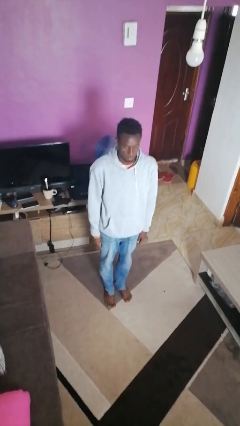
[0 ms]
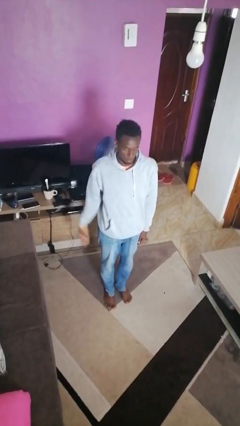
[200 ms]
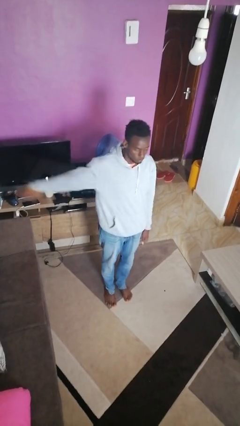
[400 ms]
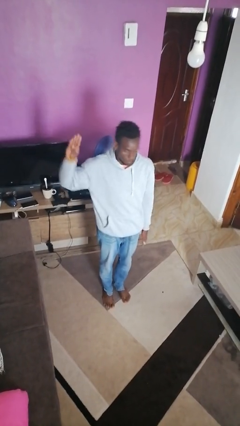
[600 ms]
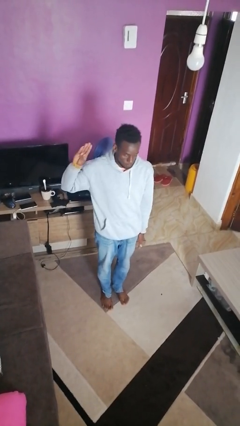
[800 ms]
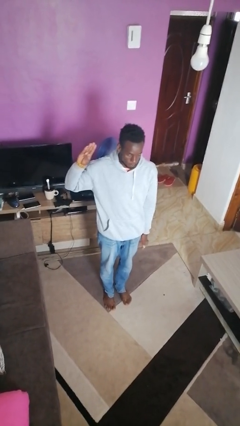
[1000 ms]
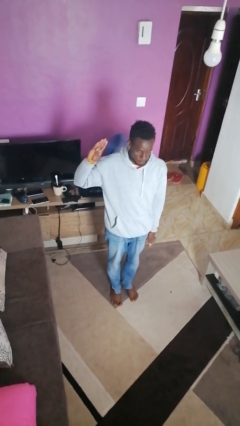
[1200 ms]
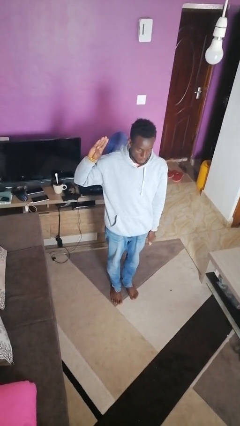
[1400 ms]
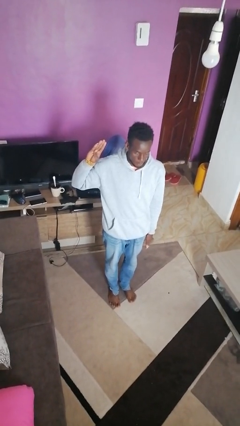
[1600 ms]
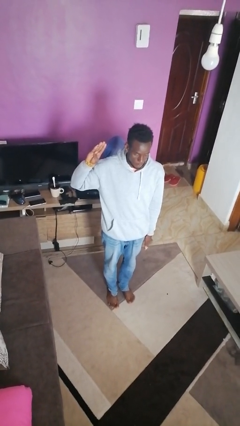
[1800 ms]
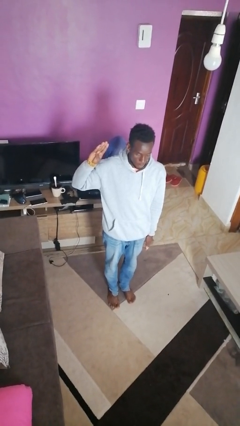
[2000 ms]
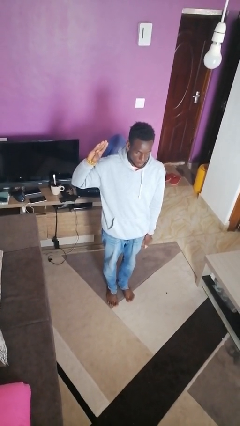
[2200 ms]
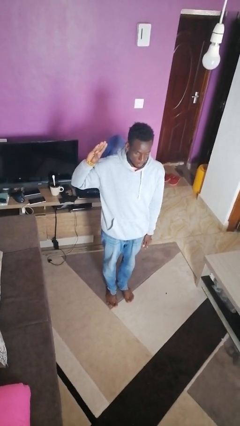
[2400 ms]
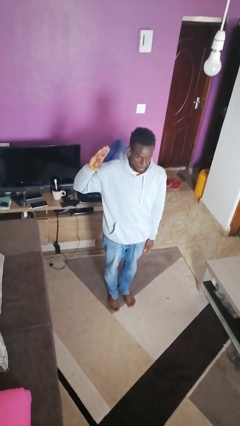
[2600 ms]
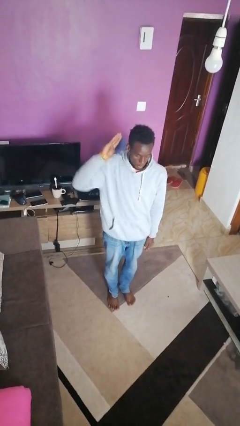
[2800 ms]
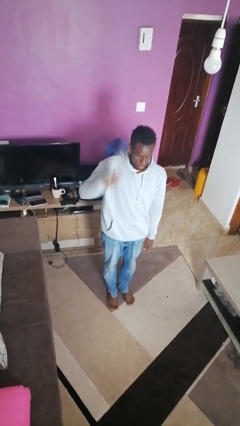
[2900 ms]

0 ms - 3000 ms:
person salutes

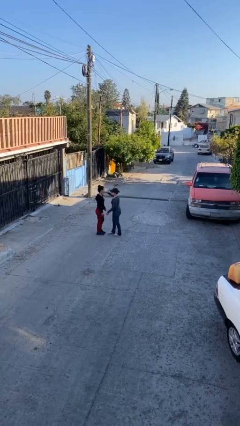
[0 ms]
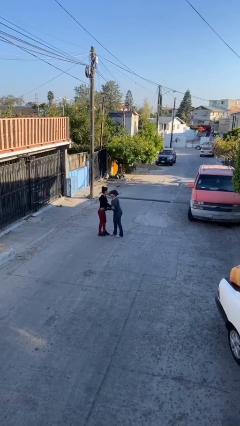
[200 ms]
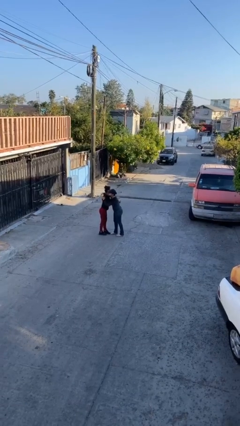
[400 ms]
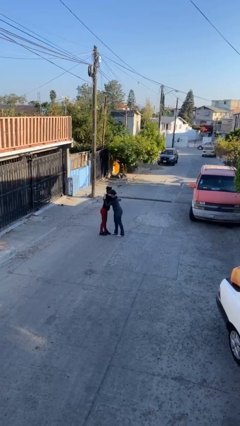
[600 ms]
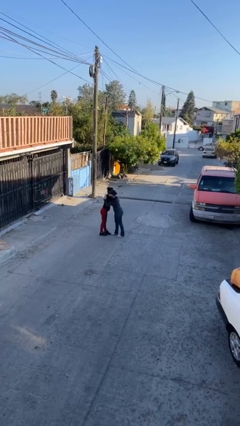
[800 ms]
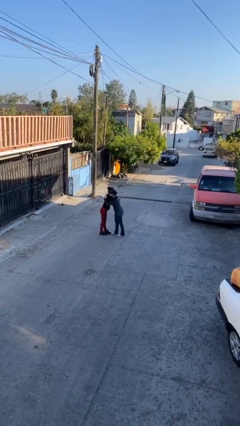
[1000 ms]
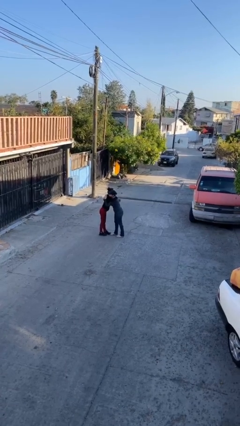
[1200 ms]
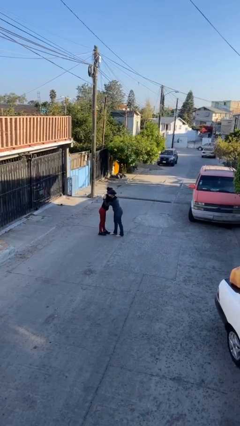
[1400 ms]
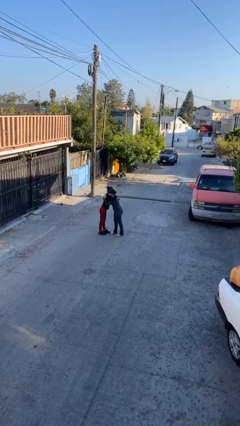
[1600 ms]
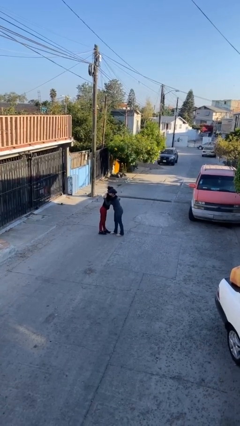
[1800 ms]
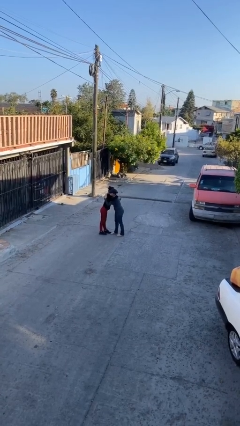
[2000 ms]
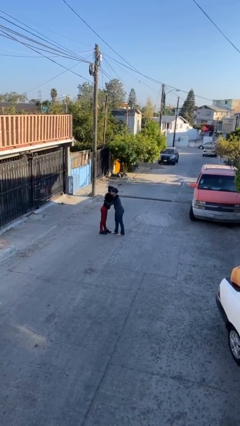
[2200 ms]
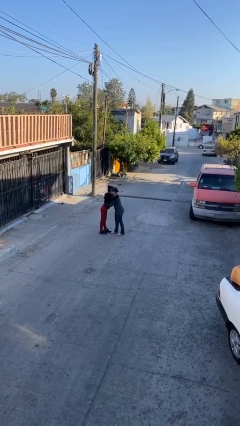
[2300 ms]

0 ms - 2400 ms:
person embraces person

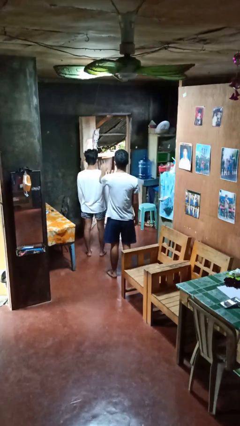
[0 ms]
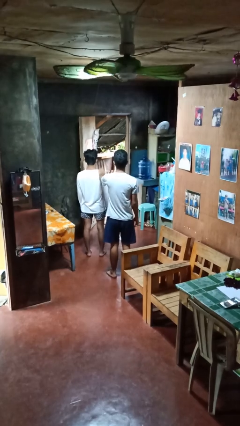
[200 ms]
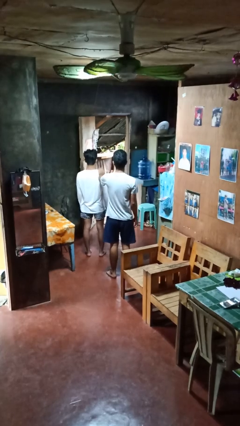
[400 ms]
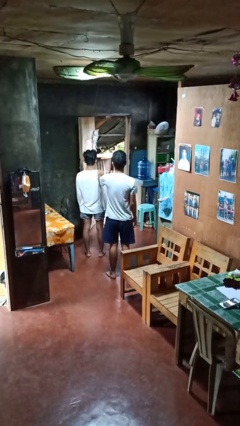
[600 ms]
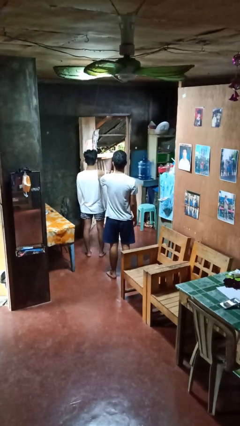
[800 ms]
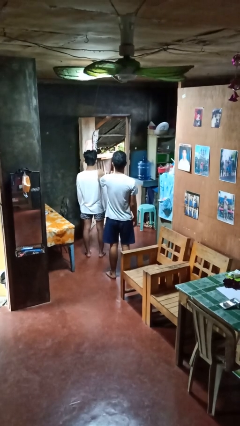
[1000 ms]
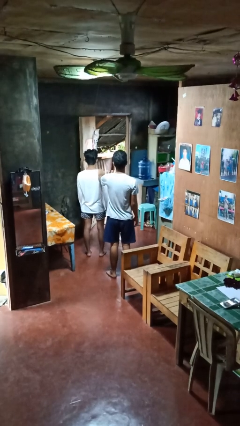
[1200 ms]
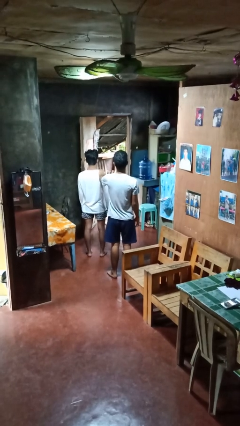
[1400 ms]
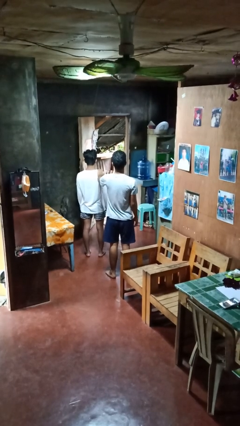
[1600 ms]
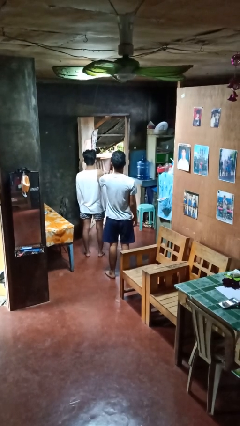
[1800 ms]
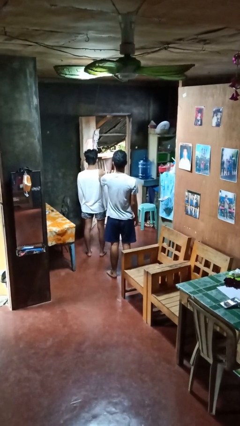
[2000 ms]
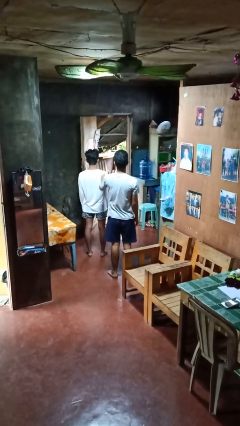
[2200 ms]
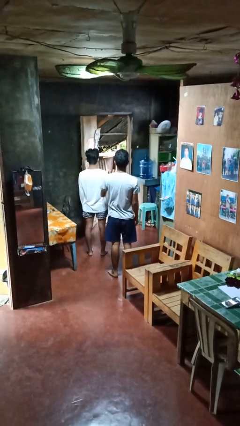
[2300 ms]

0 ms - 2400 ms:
person pounds shoulders of person

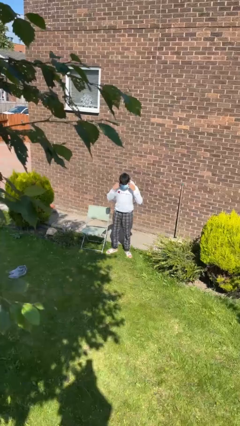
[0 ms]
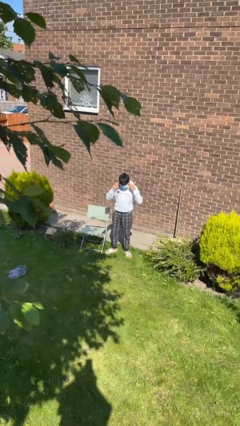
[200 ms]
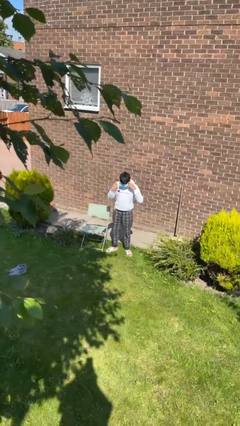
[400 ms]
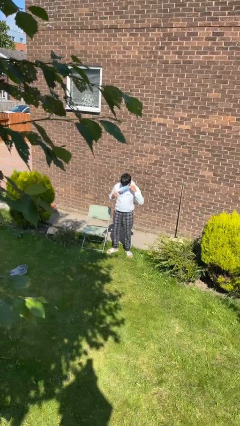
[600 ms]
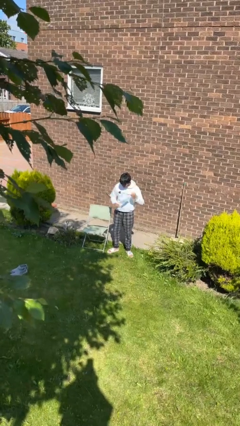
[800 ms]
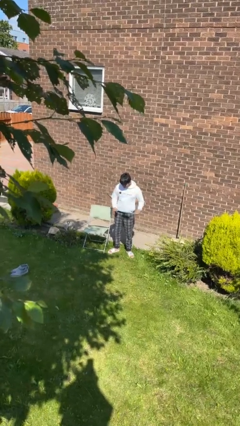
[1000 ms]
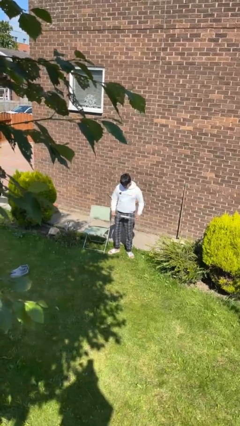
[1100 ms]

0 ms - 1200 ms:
person takes off facemask

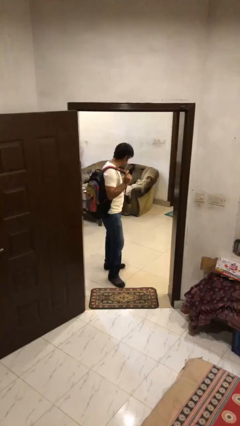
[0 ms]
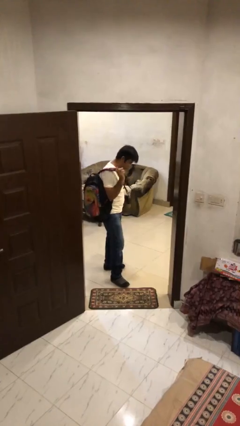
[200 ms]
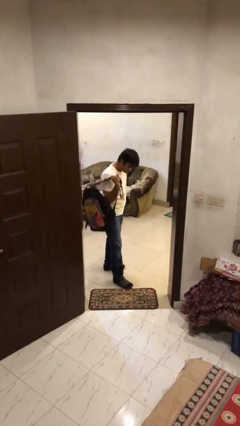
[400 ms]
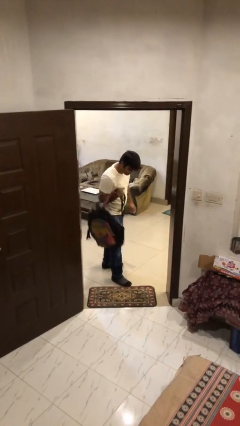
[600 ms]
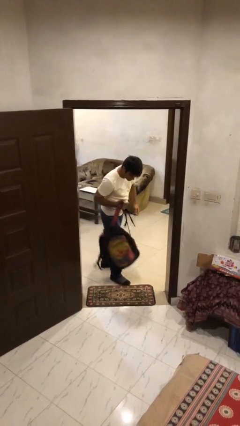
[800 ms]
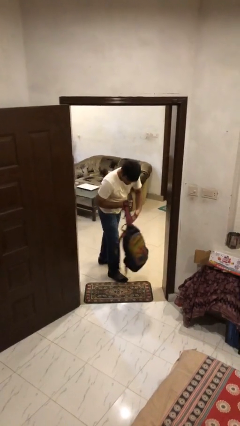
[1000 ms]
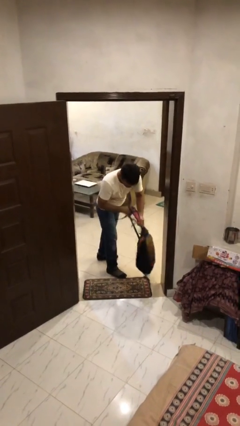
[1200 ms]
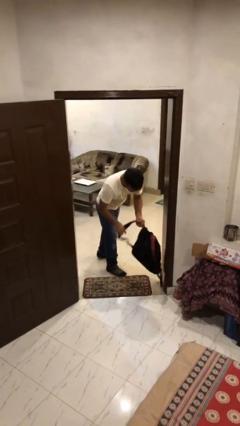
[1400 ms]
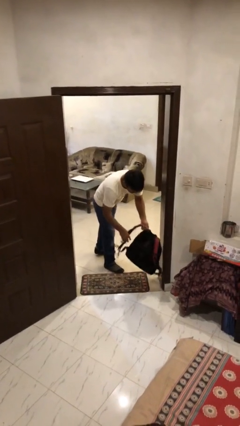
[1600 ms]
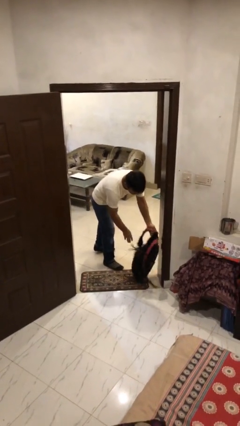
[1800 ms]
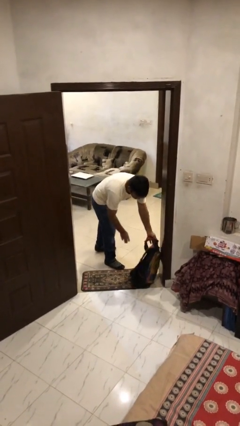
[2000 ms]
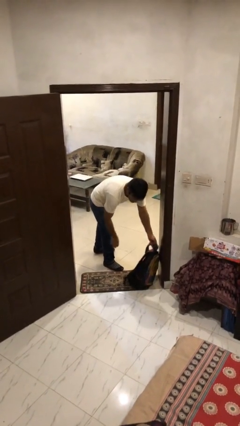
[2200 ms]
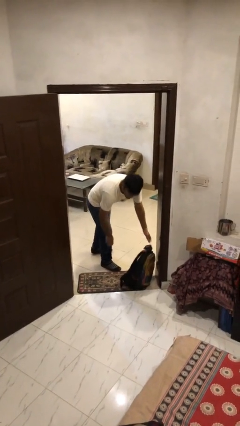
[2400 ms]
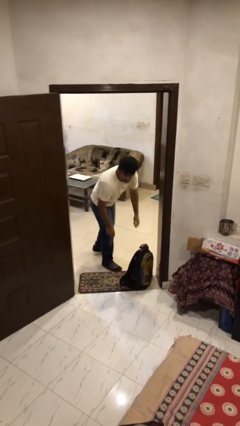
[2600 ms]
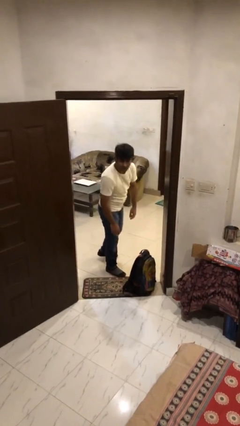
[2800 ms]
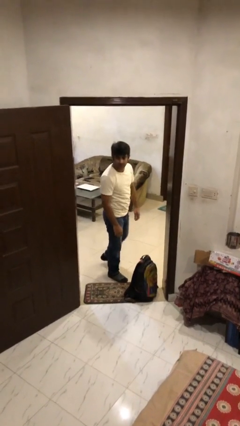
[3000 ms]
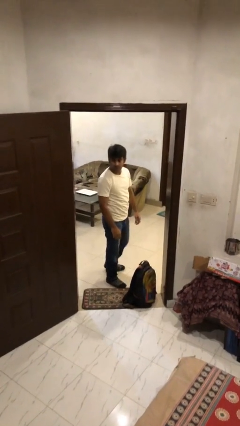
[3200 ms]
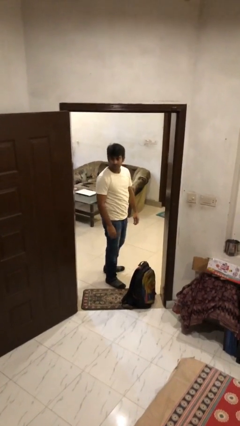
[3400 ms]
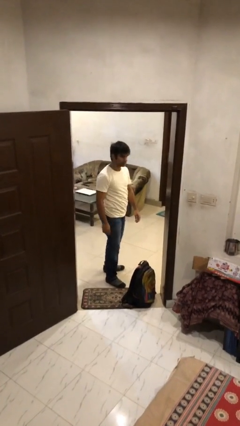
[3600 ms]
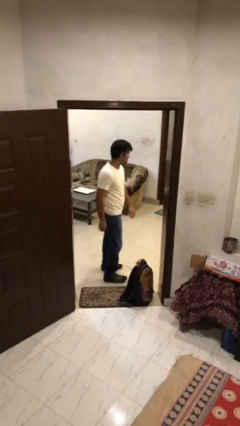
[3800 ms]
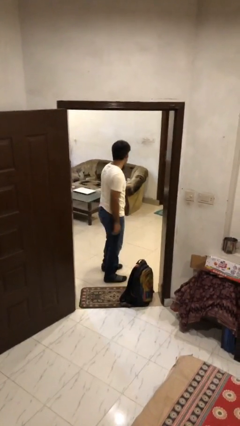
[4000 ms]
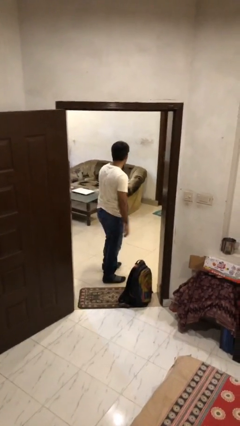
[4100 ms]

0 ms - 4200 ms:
person puts down object on floor

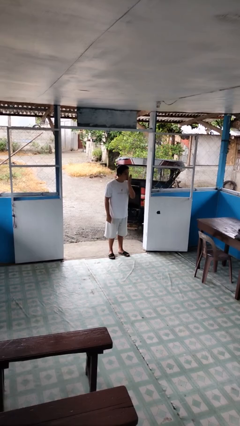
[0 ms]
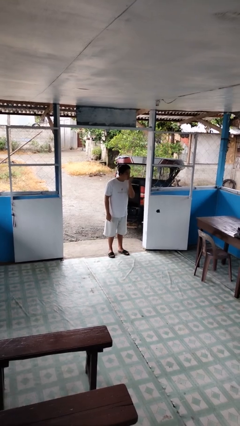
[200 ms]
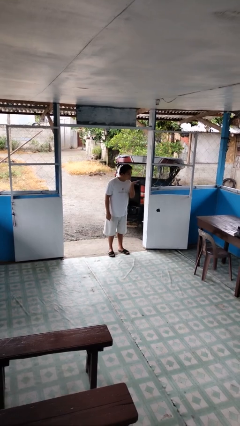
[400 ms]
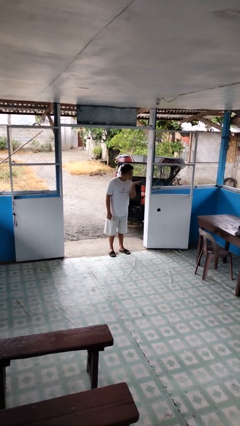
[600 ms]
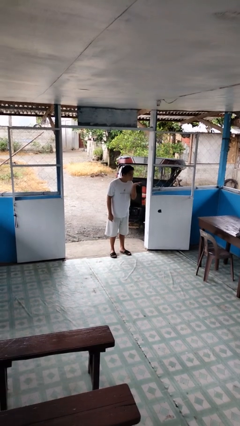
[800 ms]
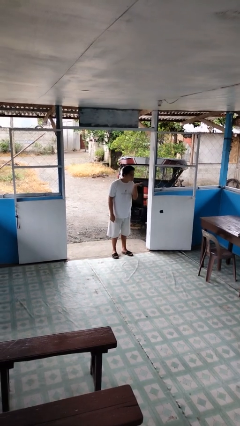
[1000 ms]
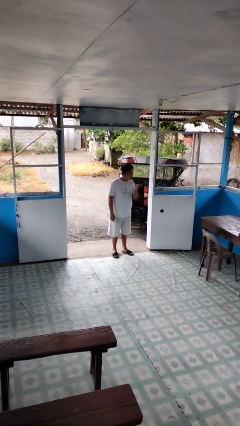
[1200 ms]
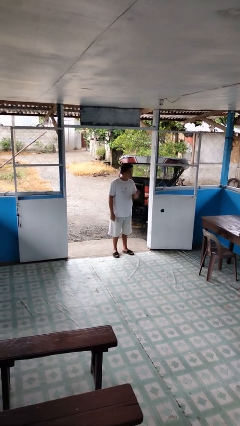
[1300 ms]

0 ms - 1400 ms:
person gestures blow kiss

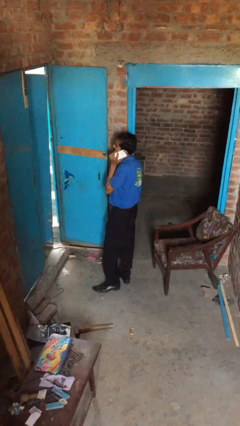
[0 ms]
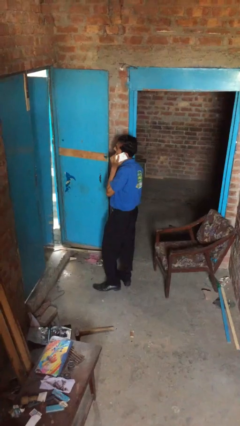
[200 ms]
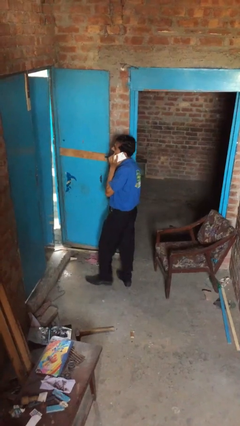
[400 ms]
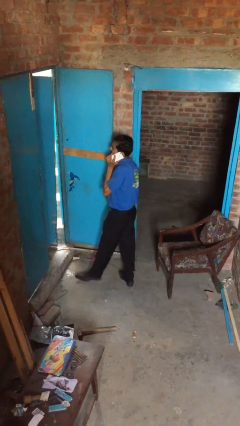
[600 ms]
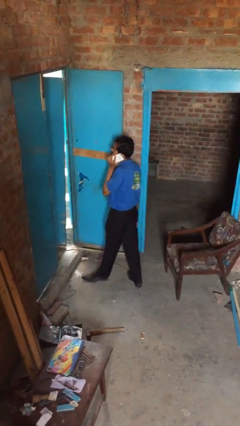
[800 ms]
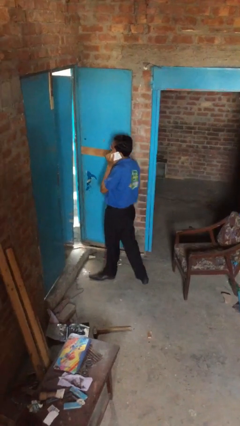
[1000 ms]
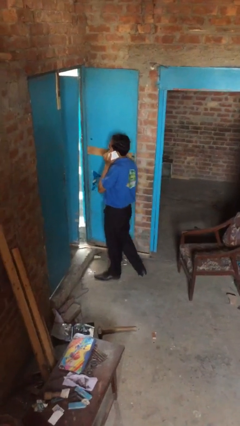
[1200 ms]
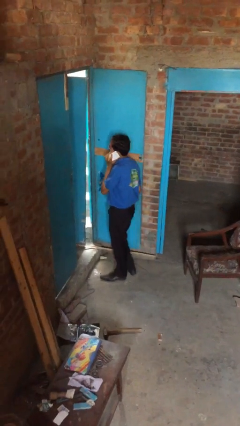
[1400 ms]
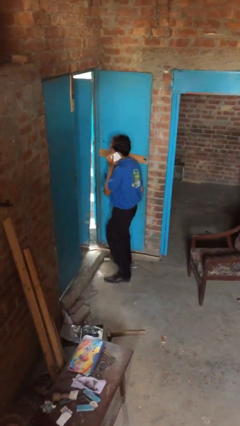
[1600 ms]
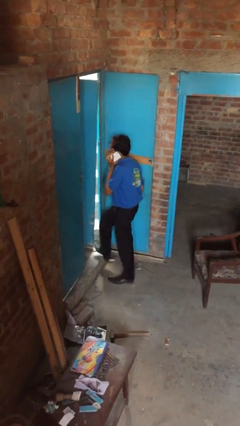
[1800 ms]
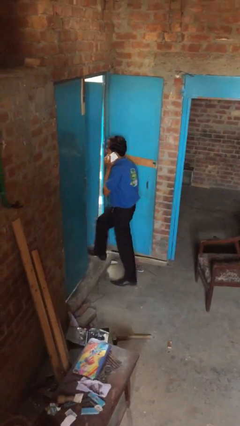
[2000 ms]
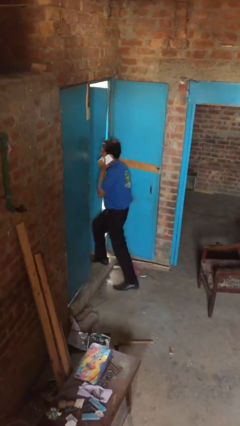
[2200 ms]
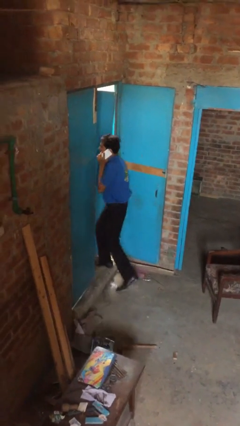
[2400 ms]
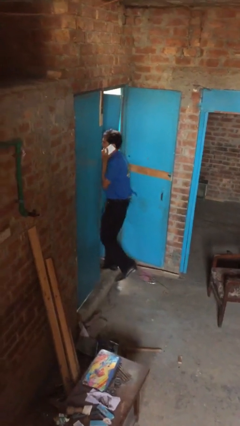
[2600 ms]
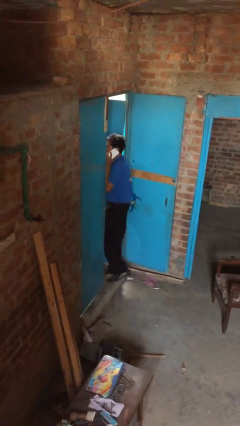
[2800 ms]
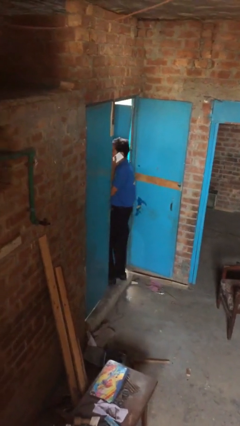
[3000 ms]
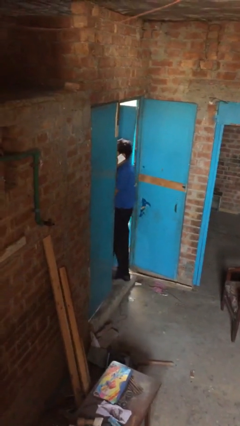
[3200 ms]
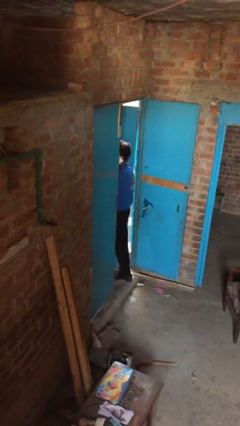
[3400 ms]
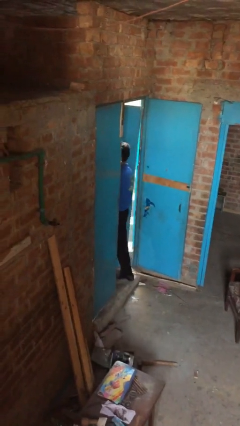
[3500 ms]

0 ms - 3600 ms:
person exits scene through structure
